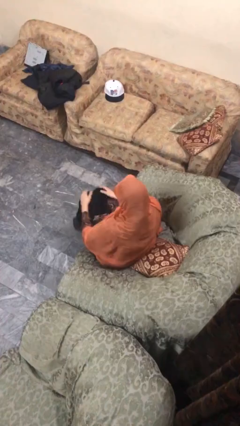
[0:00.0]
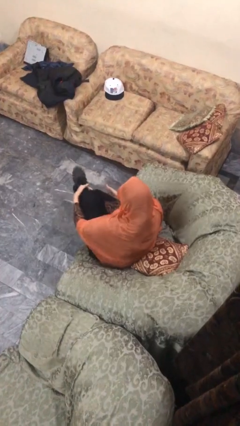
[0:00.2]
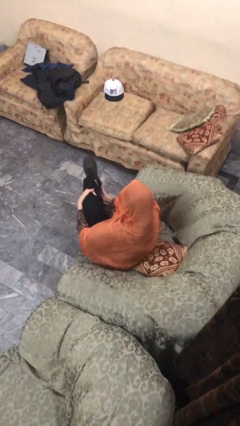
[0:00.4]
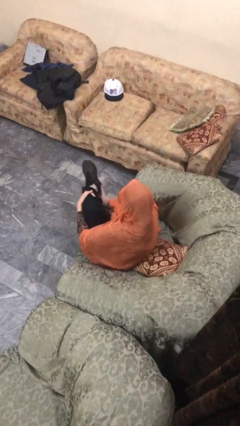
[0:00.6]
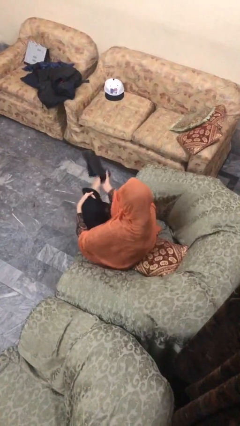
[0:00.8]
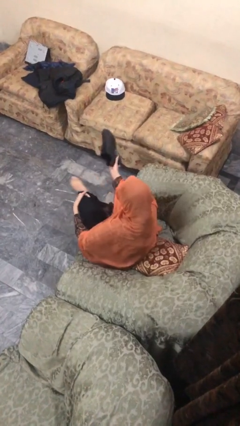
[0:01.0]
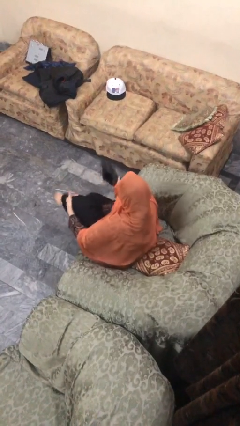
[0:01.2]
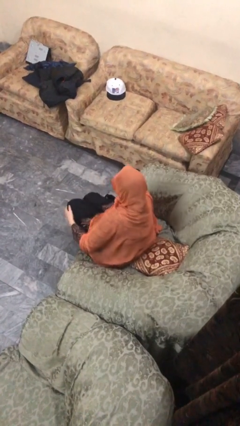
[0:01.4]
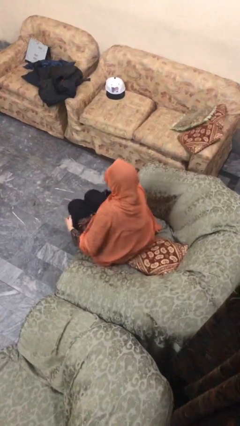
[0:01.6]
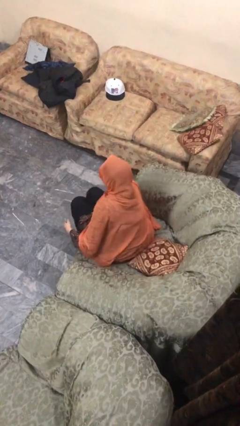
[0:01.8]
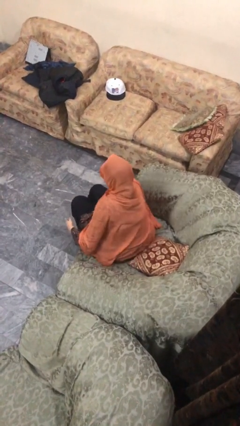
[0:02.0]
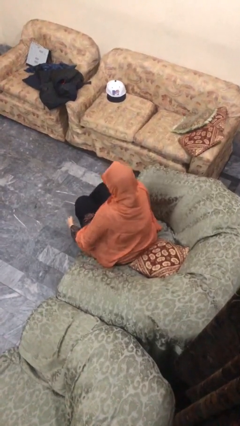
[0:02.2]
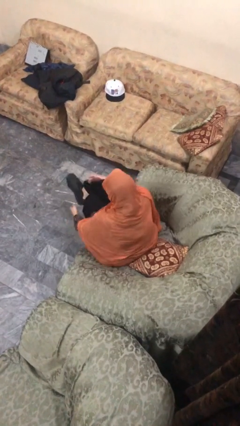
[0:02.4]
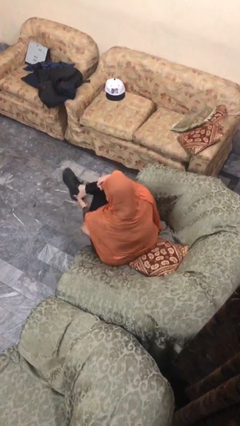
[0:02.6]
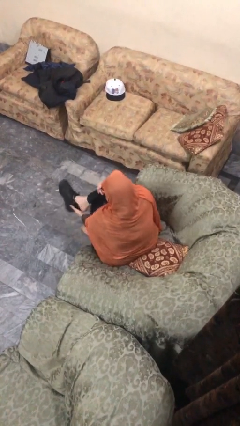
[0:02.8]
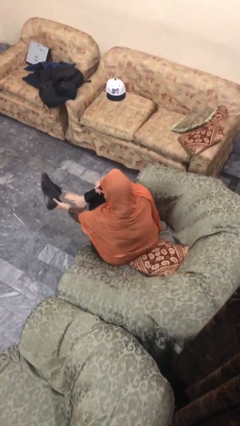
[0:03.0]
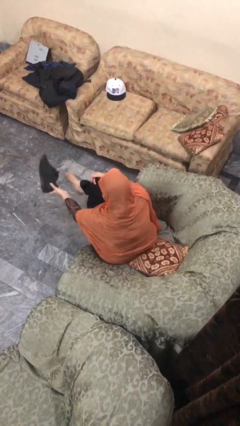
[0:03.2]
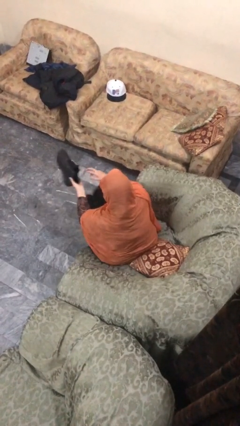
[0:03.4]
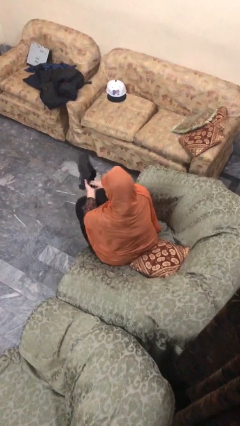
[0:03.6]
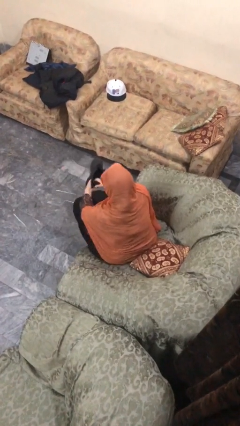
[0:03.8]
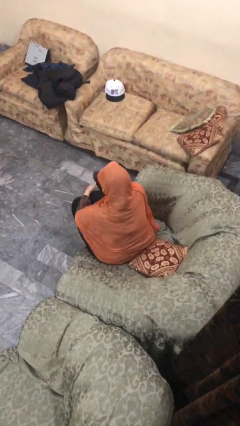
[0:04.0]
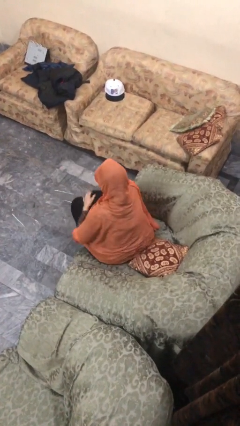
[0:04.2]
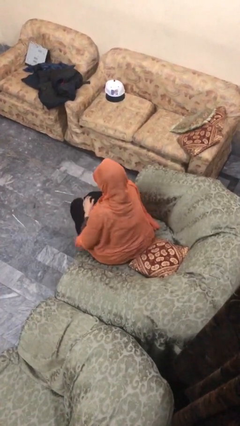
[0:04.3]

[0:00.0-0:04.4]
person takes off shoes

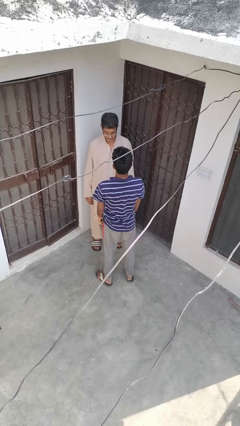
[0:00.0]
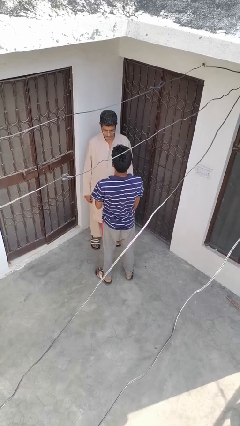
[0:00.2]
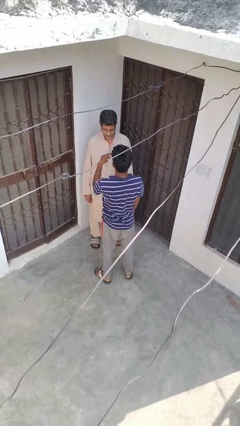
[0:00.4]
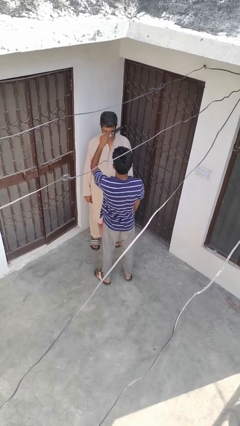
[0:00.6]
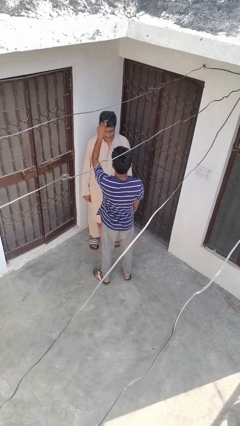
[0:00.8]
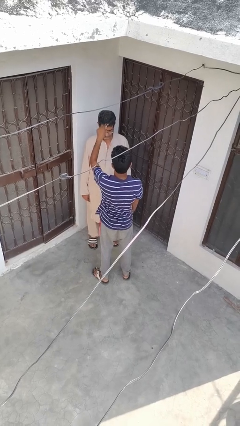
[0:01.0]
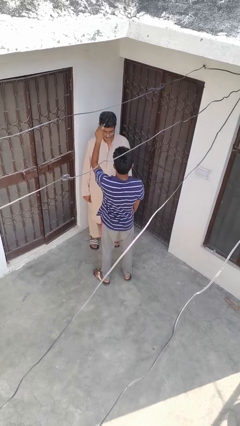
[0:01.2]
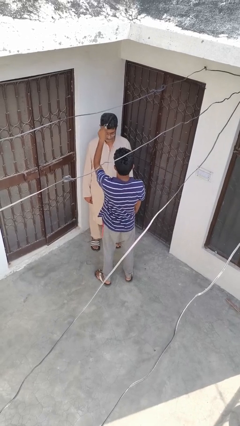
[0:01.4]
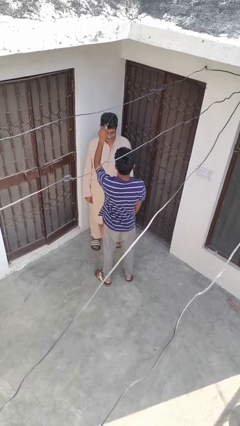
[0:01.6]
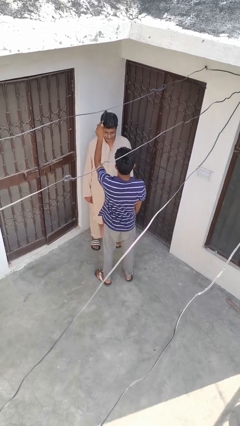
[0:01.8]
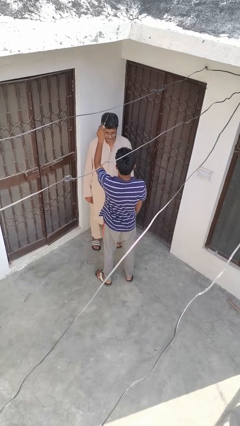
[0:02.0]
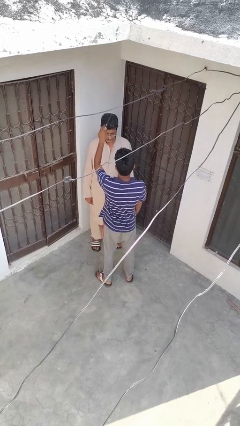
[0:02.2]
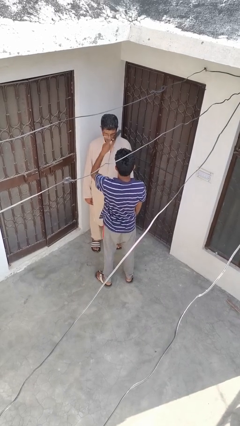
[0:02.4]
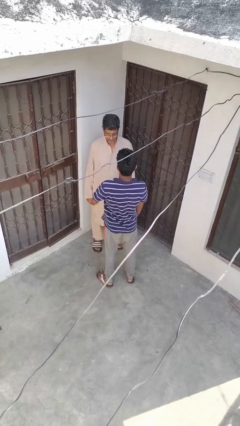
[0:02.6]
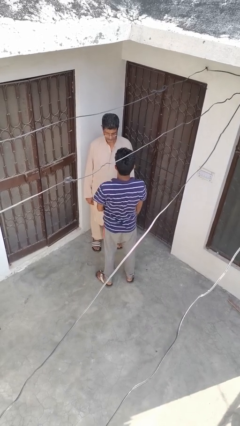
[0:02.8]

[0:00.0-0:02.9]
person brushes hair of person

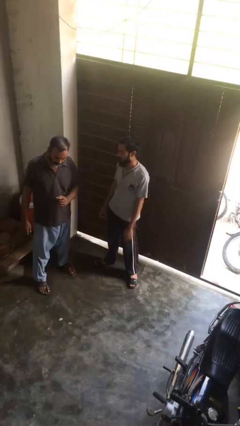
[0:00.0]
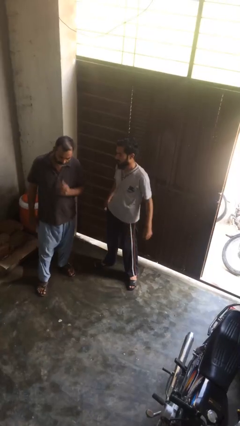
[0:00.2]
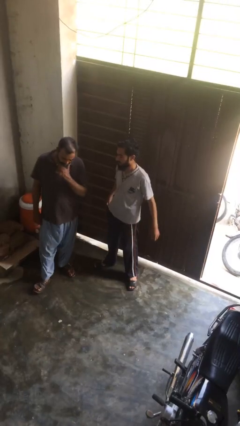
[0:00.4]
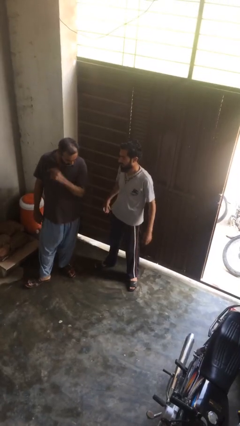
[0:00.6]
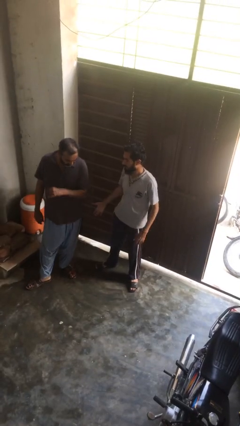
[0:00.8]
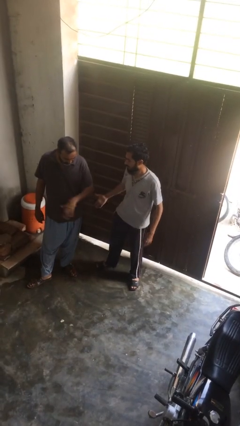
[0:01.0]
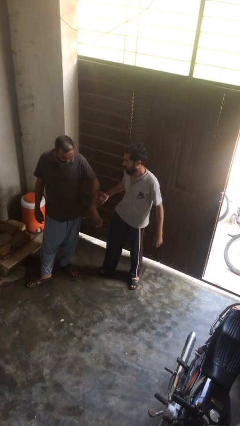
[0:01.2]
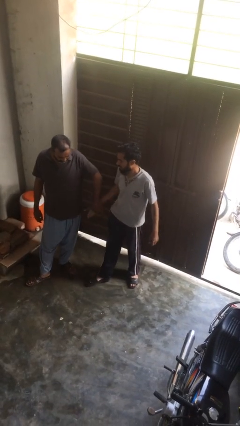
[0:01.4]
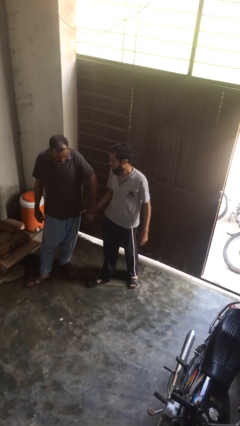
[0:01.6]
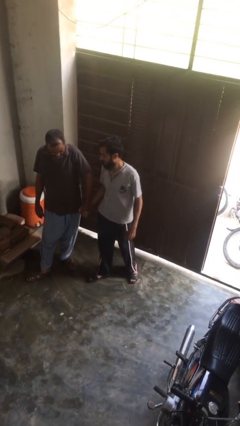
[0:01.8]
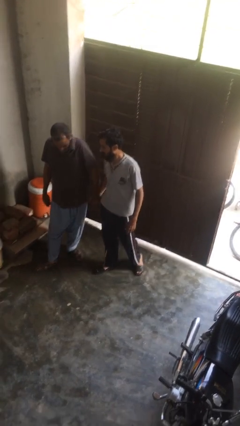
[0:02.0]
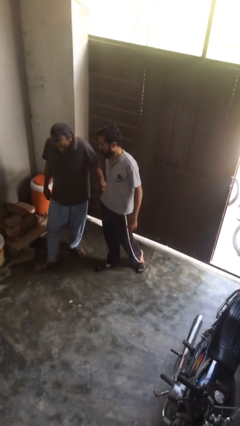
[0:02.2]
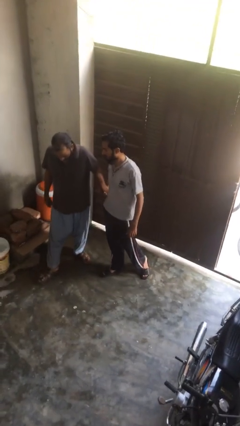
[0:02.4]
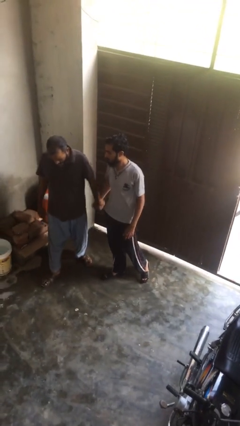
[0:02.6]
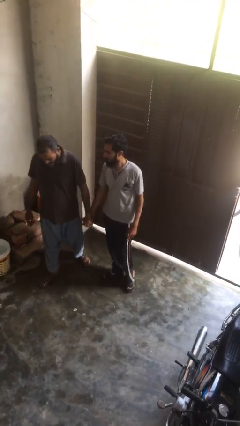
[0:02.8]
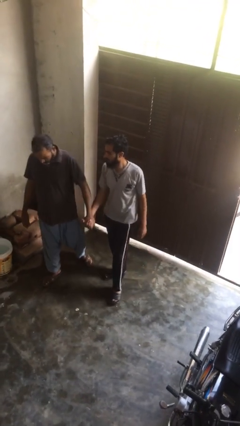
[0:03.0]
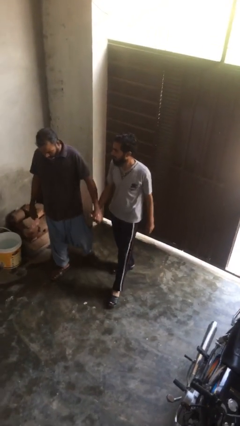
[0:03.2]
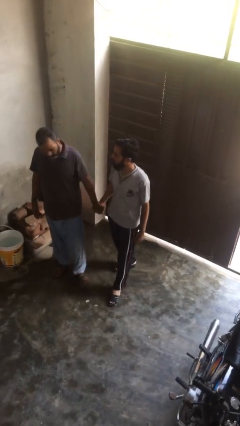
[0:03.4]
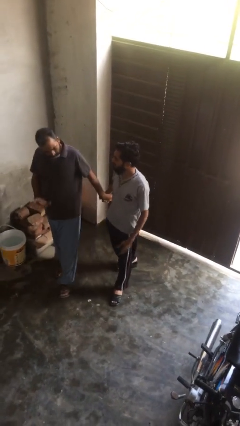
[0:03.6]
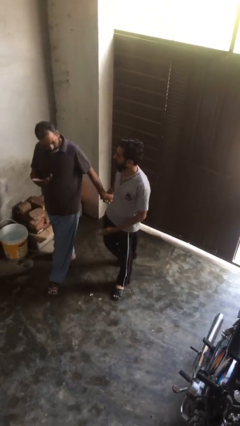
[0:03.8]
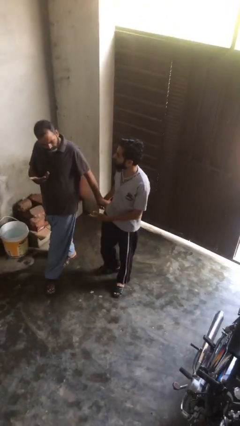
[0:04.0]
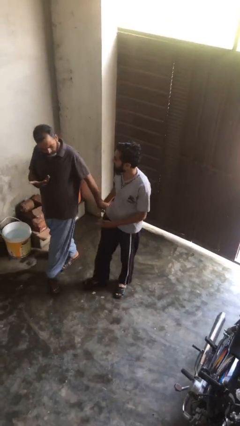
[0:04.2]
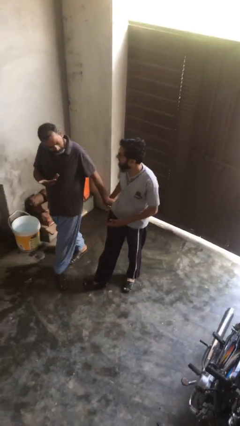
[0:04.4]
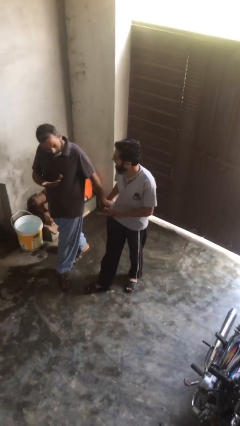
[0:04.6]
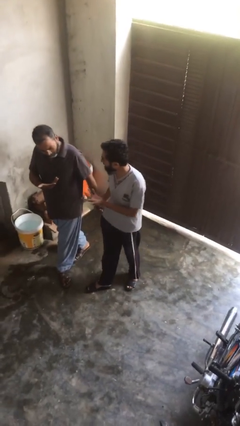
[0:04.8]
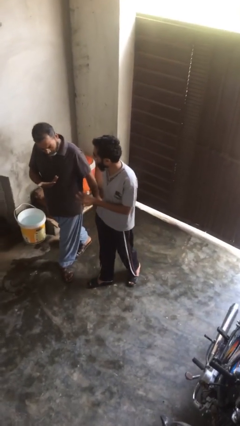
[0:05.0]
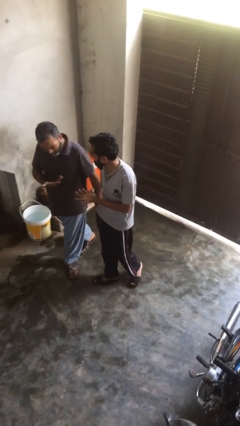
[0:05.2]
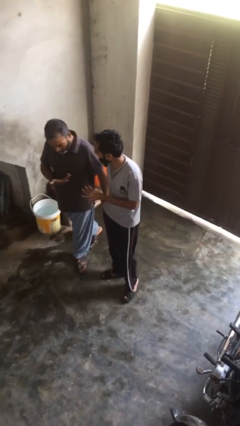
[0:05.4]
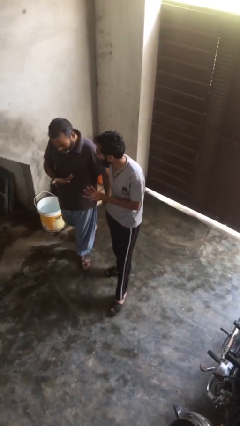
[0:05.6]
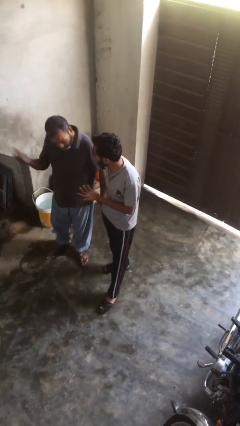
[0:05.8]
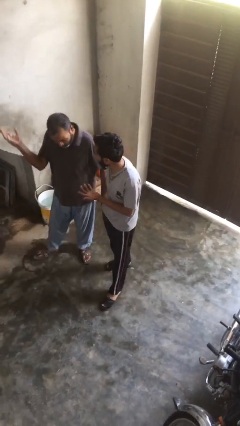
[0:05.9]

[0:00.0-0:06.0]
person holds hand

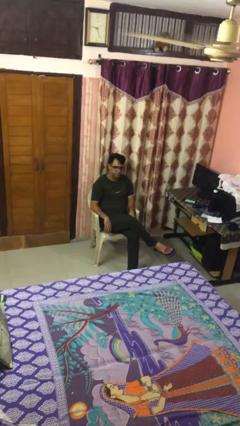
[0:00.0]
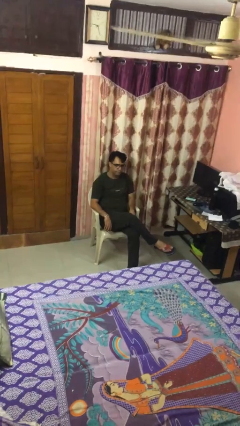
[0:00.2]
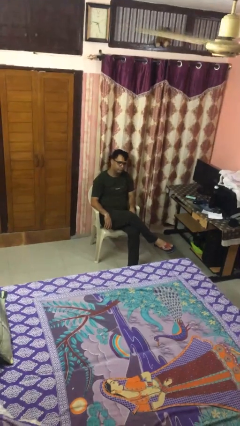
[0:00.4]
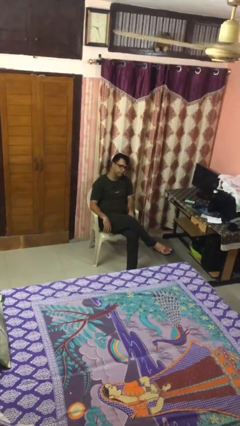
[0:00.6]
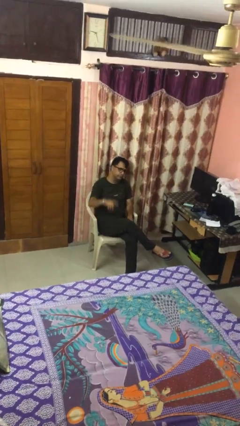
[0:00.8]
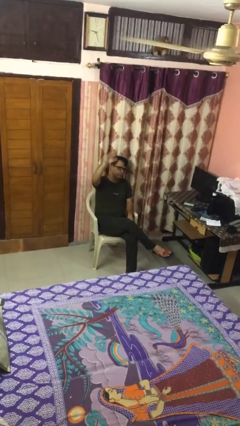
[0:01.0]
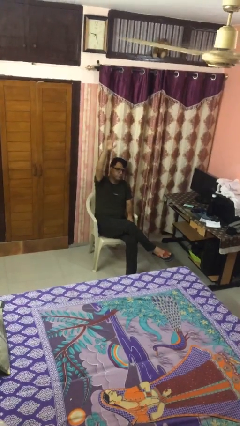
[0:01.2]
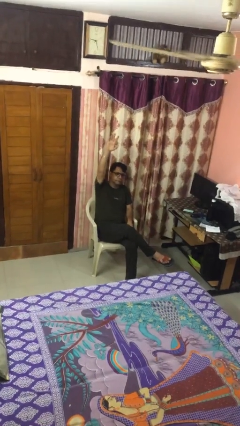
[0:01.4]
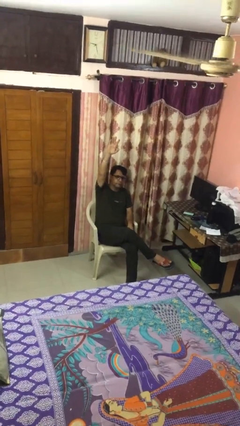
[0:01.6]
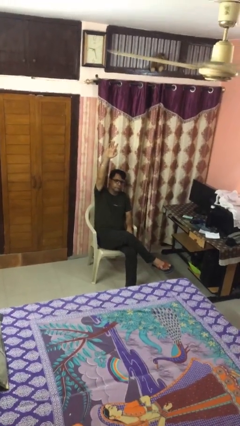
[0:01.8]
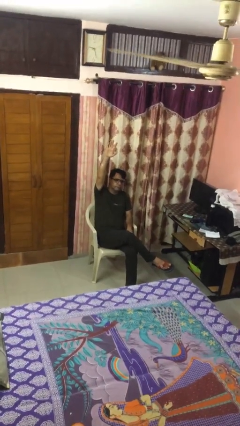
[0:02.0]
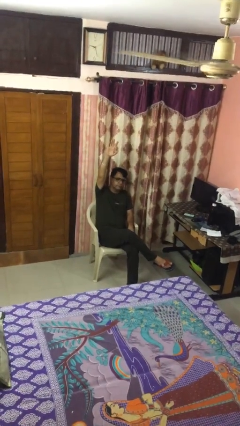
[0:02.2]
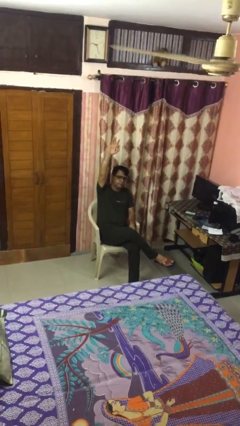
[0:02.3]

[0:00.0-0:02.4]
person gestures raise hand

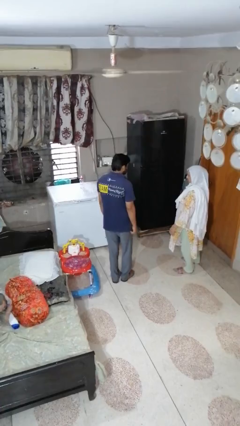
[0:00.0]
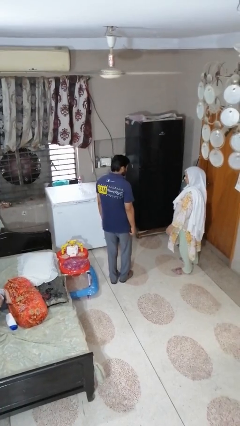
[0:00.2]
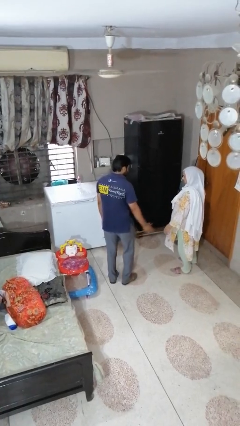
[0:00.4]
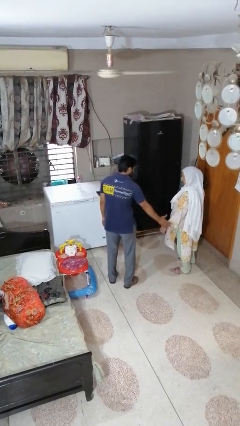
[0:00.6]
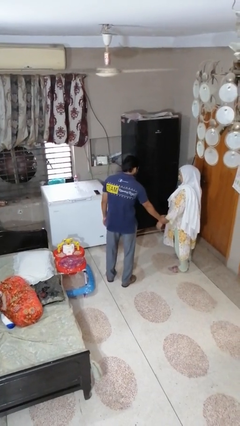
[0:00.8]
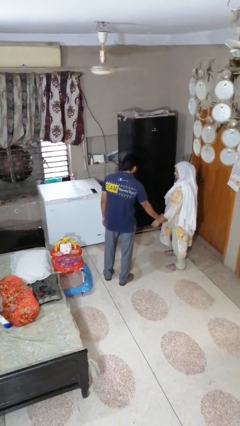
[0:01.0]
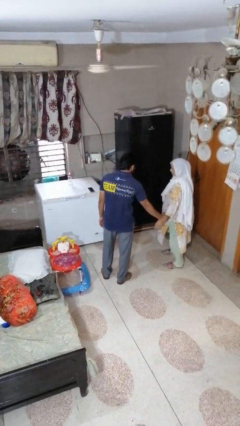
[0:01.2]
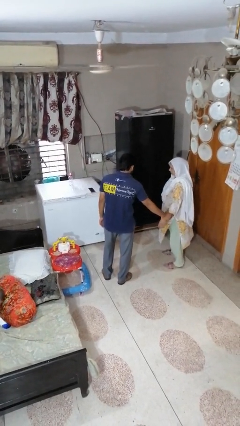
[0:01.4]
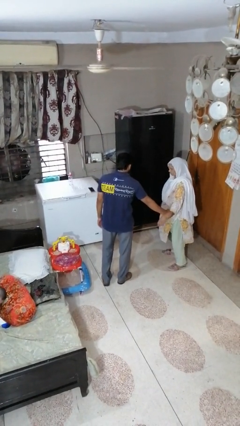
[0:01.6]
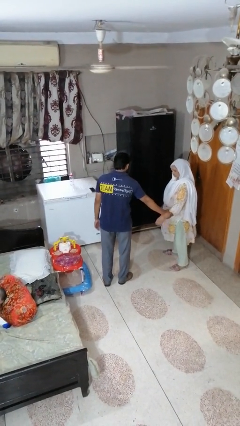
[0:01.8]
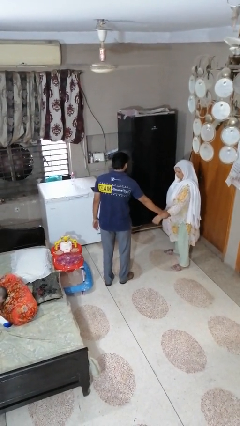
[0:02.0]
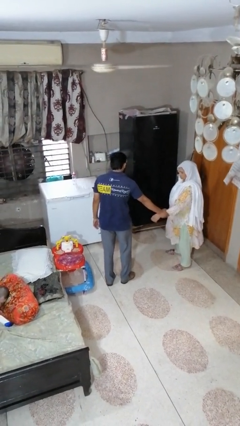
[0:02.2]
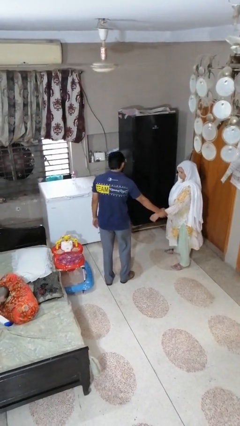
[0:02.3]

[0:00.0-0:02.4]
person grabs person by forearm
